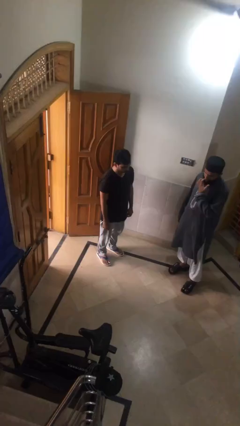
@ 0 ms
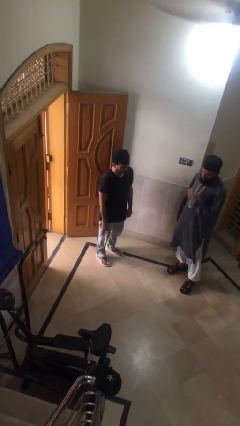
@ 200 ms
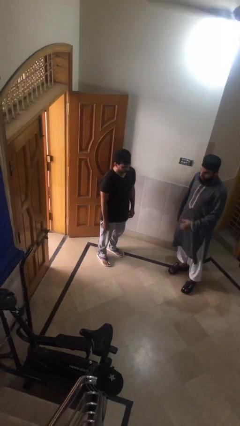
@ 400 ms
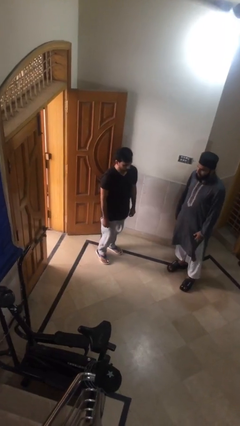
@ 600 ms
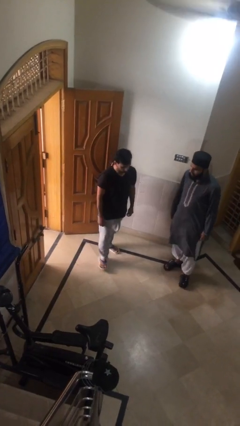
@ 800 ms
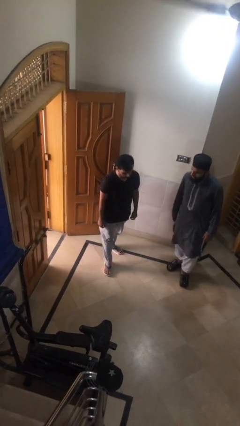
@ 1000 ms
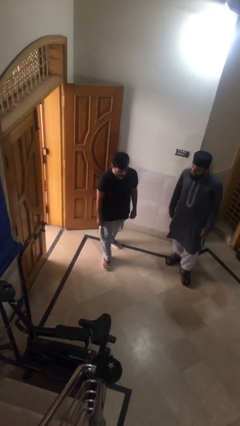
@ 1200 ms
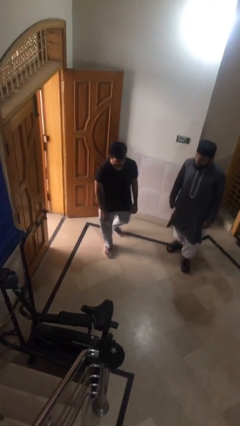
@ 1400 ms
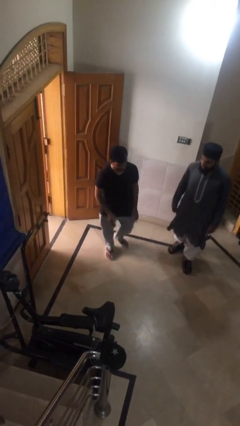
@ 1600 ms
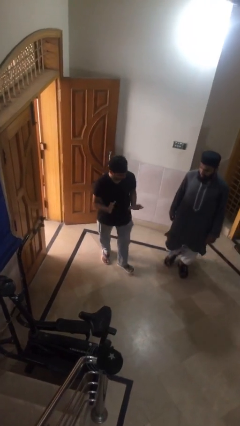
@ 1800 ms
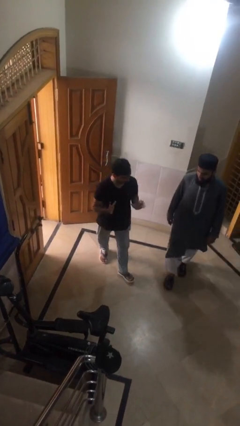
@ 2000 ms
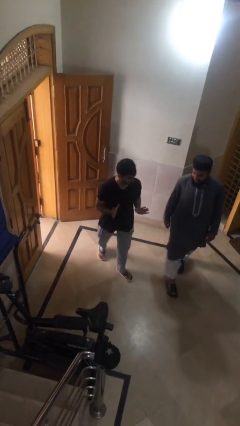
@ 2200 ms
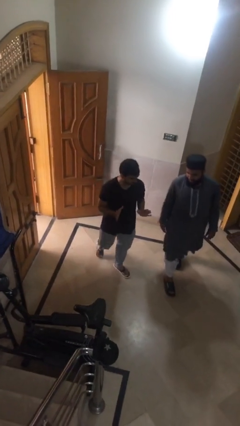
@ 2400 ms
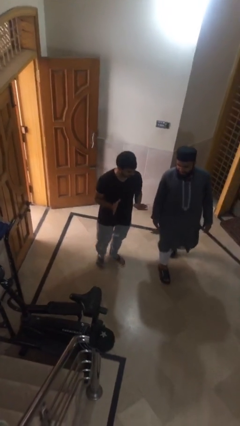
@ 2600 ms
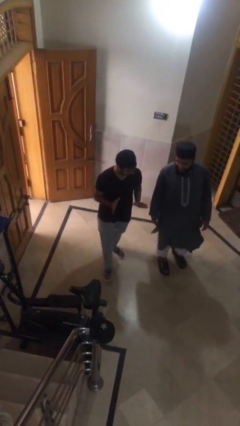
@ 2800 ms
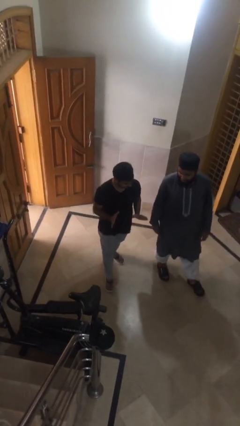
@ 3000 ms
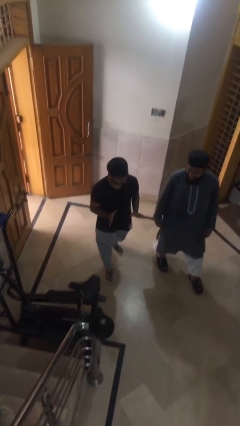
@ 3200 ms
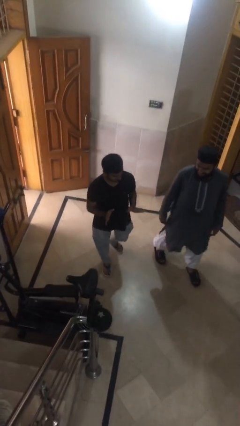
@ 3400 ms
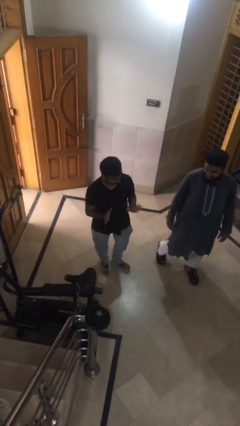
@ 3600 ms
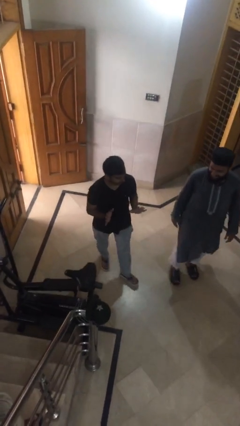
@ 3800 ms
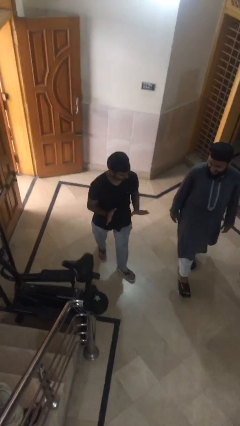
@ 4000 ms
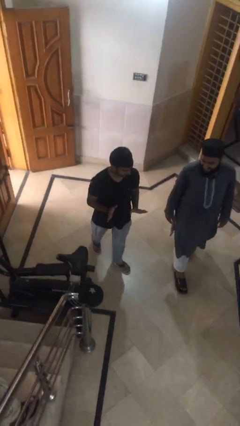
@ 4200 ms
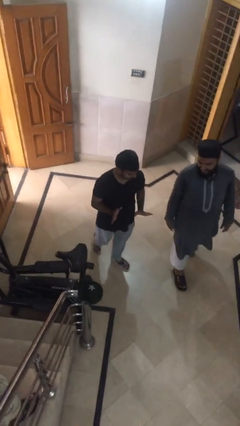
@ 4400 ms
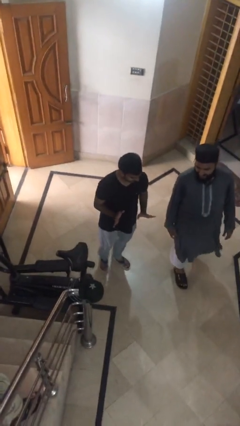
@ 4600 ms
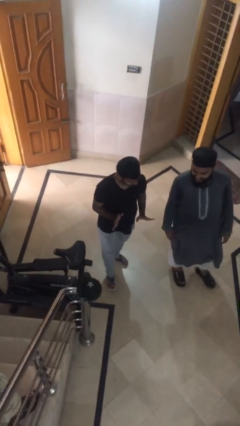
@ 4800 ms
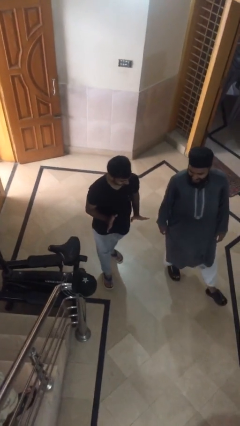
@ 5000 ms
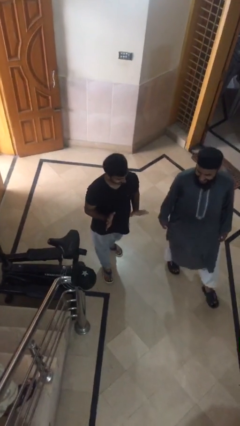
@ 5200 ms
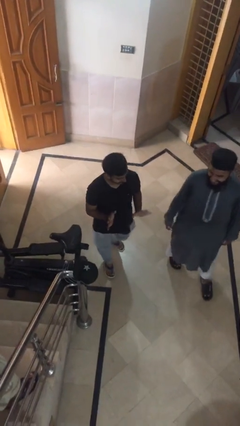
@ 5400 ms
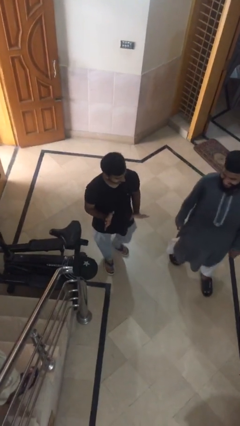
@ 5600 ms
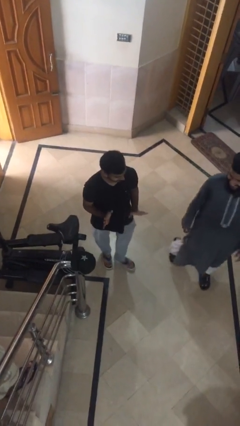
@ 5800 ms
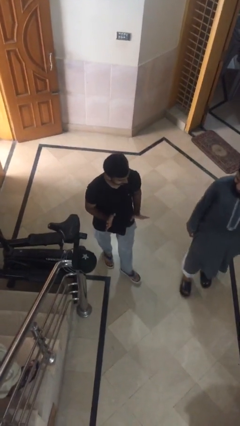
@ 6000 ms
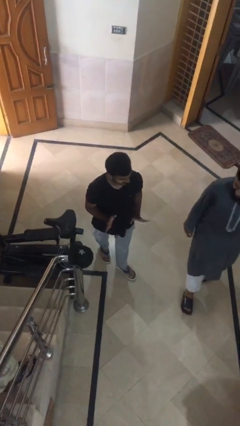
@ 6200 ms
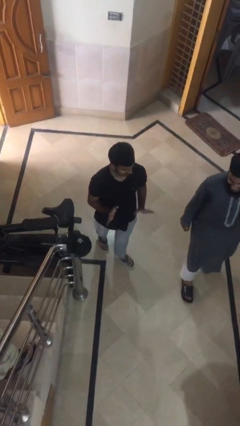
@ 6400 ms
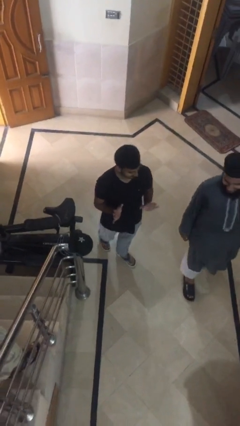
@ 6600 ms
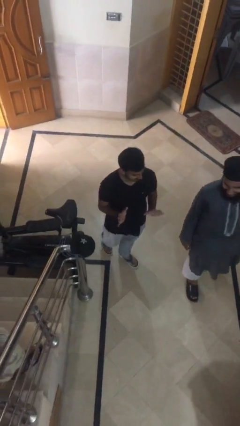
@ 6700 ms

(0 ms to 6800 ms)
person talks to person

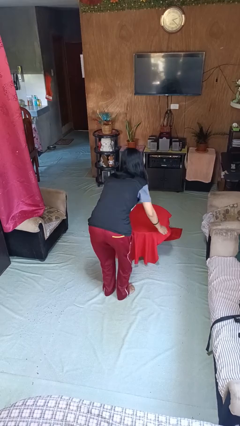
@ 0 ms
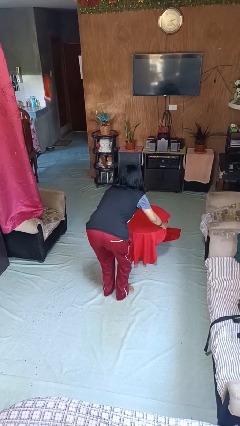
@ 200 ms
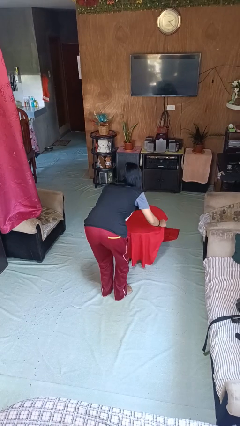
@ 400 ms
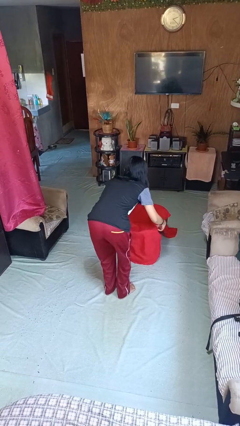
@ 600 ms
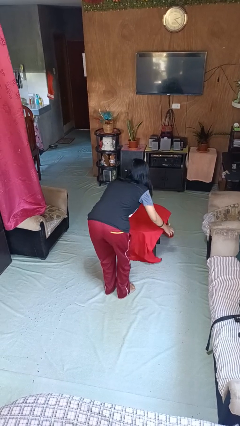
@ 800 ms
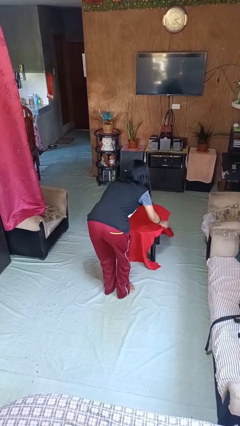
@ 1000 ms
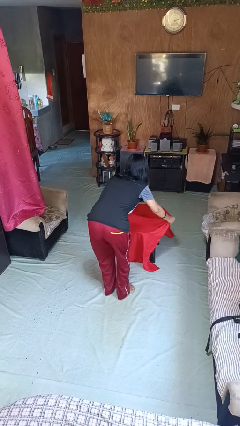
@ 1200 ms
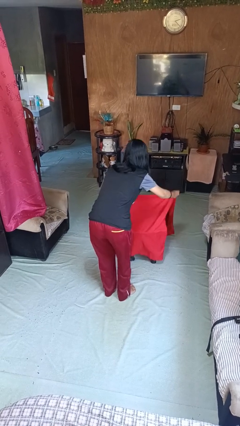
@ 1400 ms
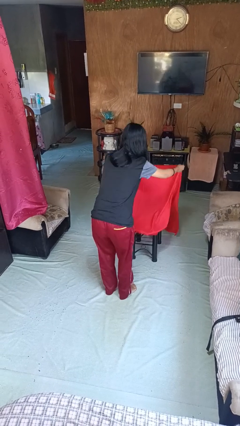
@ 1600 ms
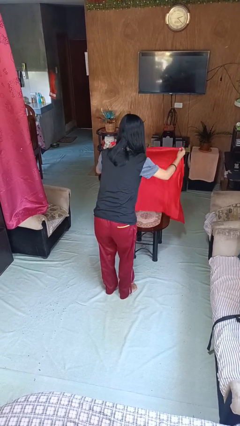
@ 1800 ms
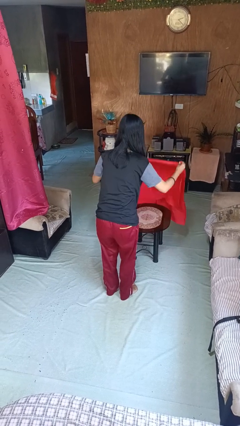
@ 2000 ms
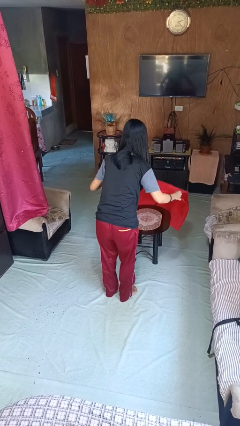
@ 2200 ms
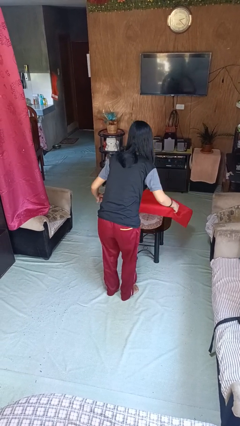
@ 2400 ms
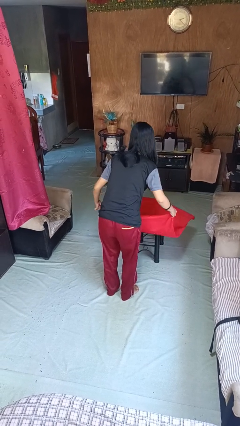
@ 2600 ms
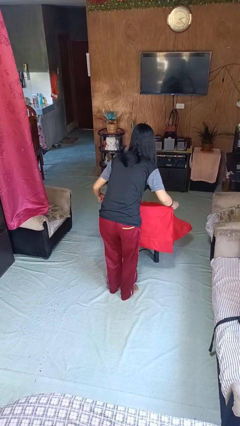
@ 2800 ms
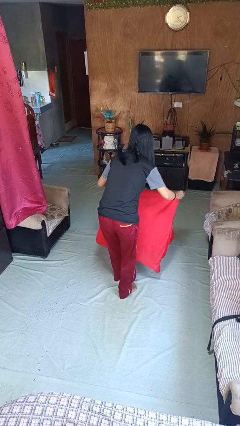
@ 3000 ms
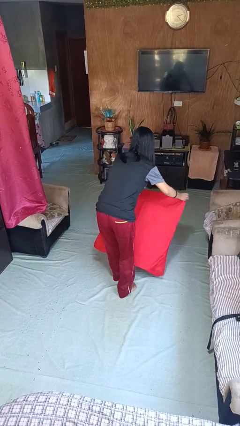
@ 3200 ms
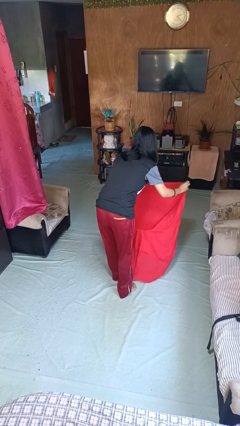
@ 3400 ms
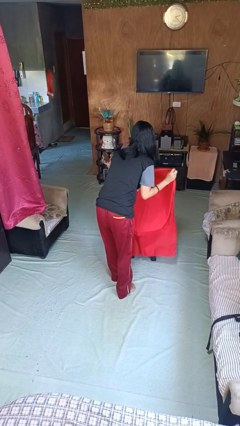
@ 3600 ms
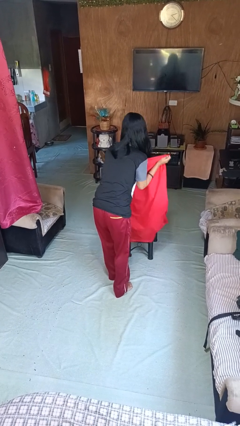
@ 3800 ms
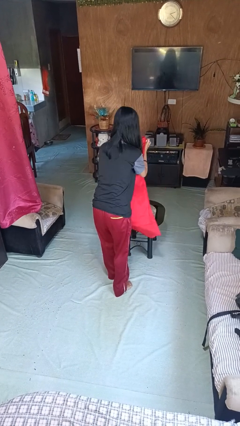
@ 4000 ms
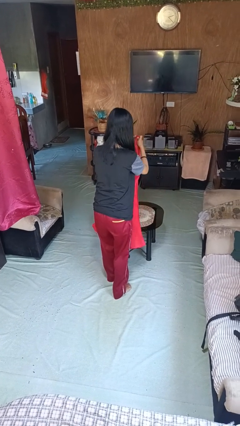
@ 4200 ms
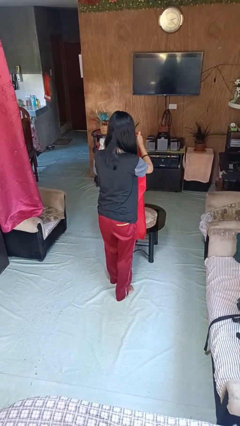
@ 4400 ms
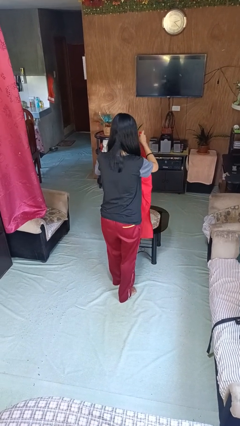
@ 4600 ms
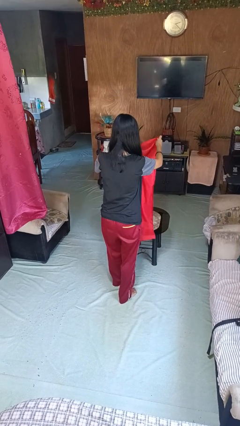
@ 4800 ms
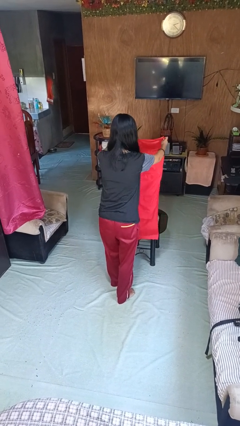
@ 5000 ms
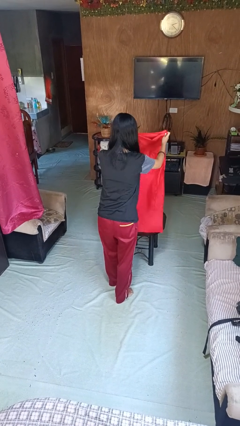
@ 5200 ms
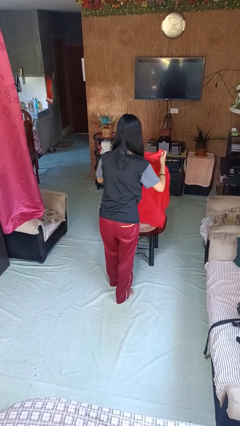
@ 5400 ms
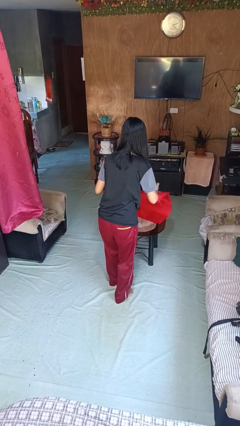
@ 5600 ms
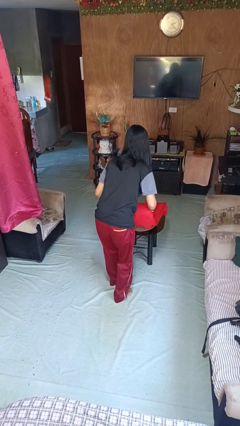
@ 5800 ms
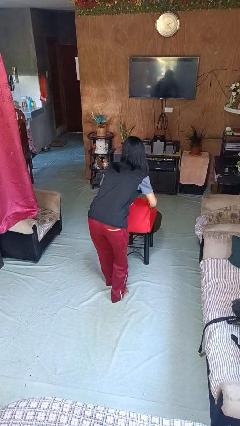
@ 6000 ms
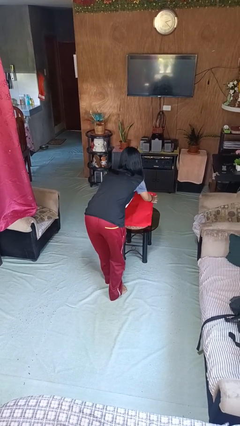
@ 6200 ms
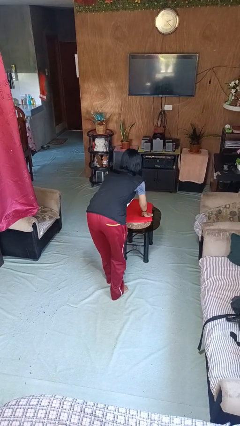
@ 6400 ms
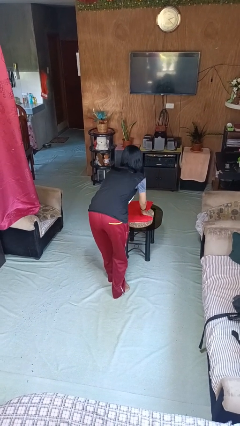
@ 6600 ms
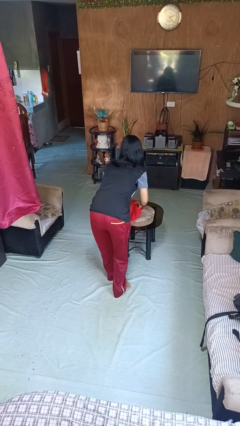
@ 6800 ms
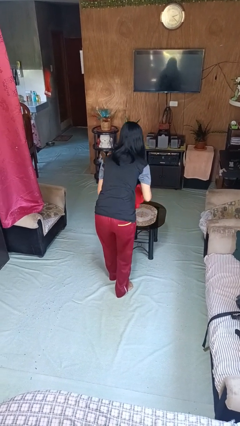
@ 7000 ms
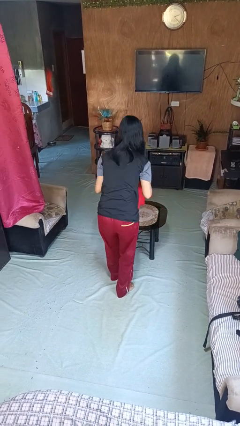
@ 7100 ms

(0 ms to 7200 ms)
person folds tablecloth

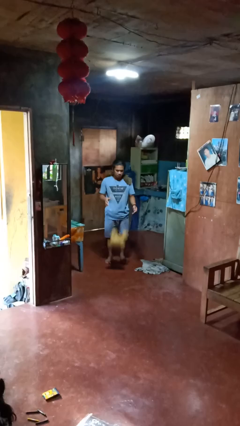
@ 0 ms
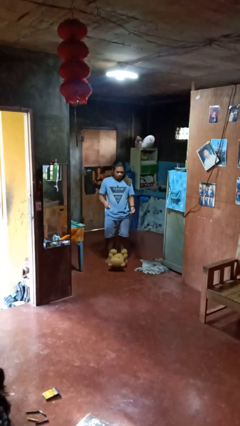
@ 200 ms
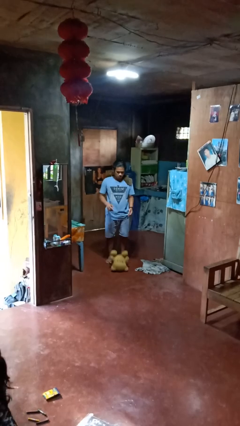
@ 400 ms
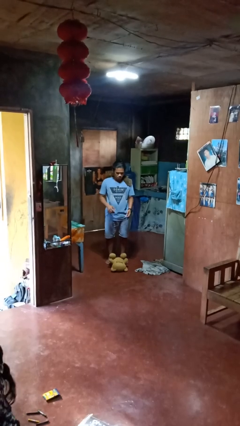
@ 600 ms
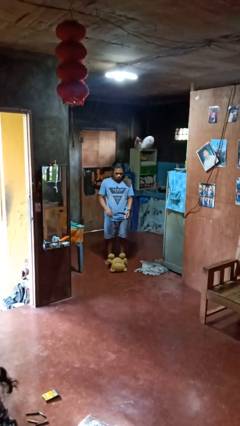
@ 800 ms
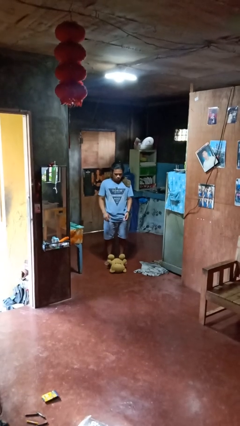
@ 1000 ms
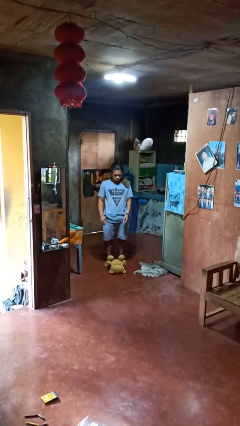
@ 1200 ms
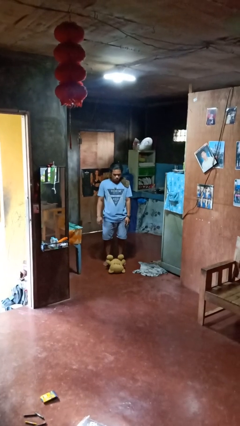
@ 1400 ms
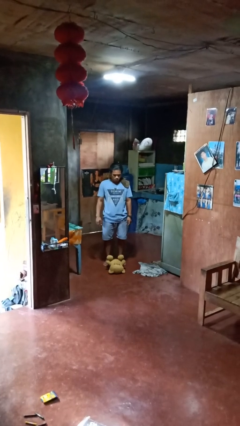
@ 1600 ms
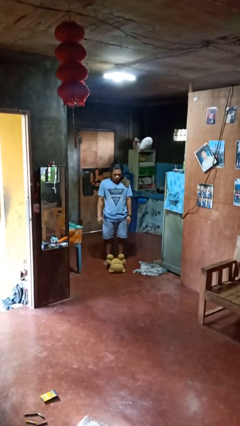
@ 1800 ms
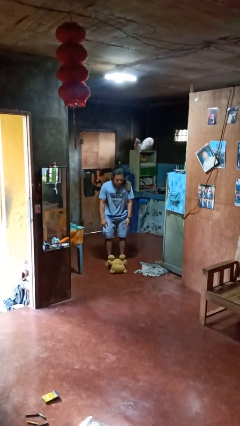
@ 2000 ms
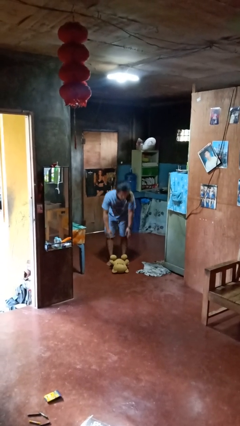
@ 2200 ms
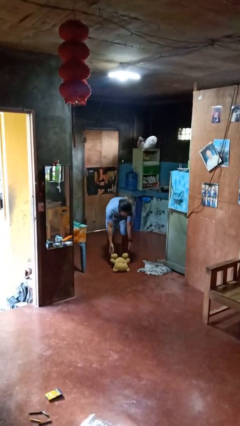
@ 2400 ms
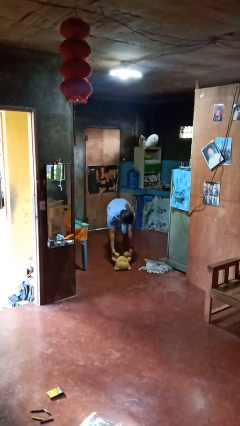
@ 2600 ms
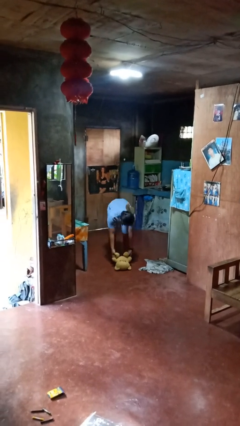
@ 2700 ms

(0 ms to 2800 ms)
person drops object

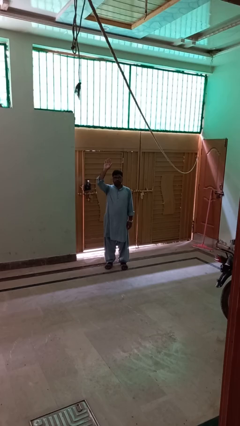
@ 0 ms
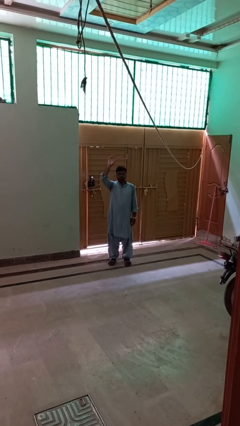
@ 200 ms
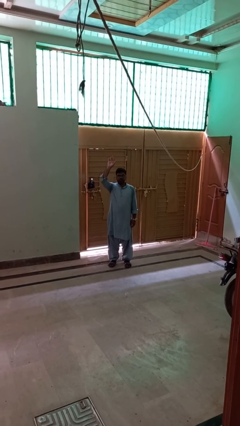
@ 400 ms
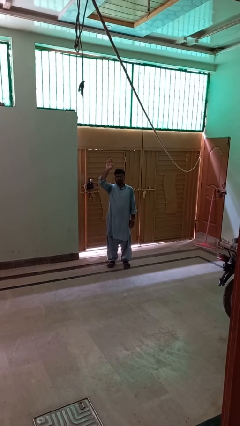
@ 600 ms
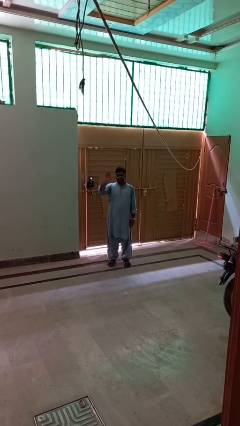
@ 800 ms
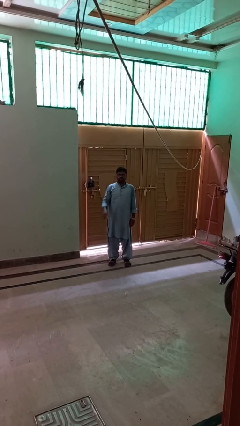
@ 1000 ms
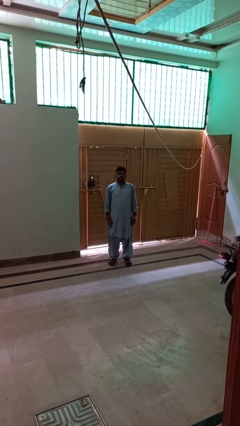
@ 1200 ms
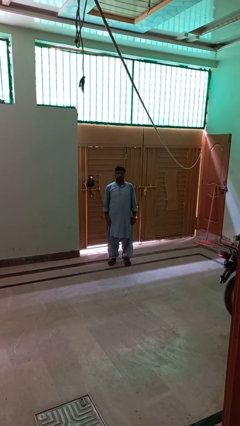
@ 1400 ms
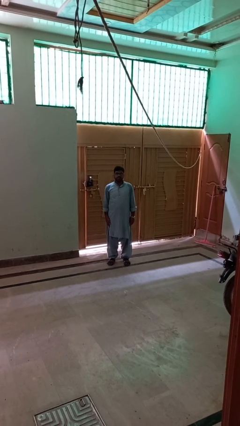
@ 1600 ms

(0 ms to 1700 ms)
person gestures lower hand
